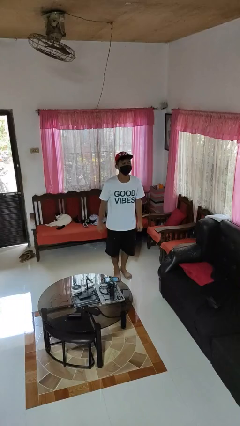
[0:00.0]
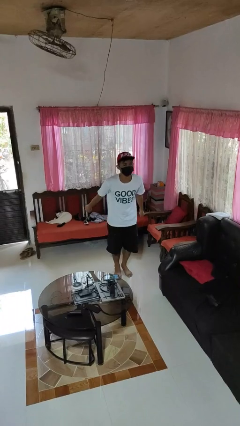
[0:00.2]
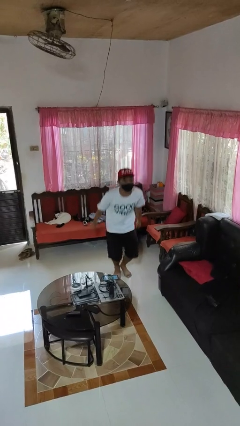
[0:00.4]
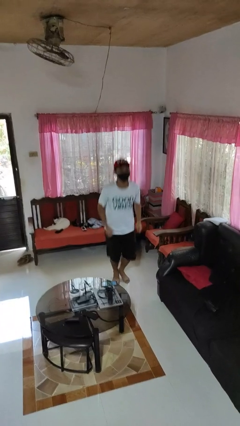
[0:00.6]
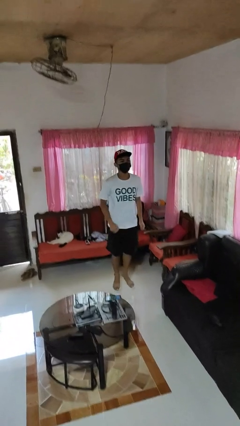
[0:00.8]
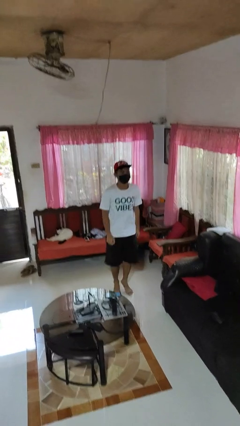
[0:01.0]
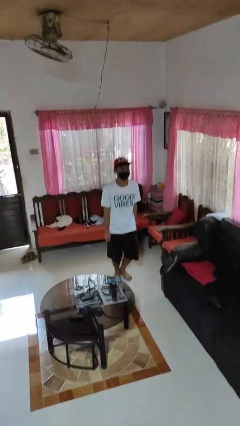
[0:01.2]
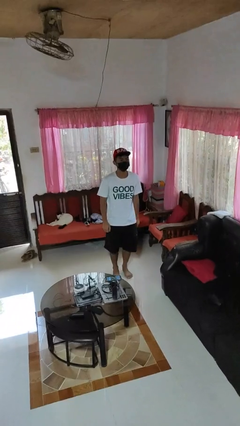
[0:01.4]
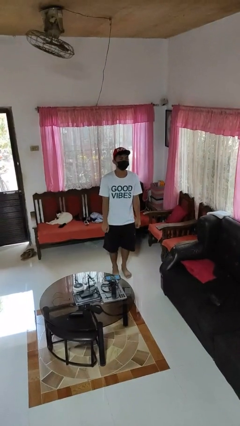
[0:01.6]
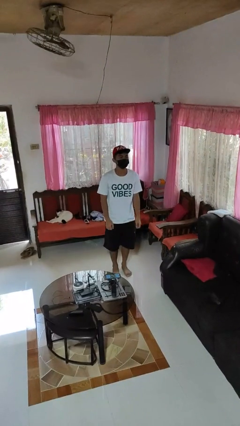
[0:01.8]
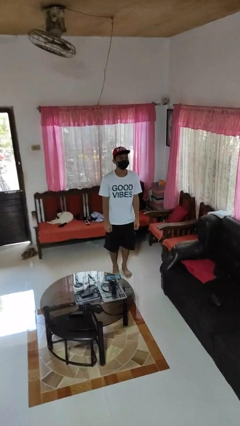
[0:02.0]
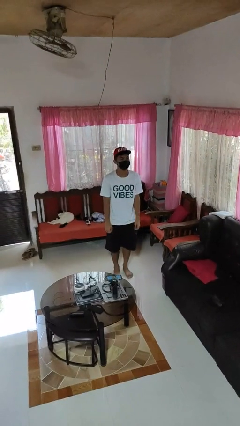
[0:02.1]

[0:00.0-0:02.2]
person jumps

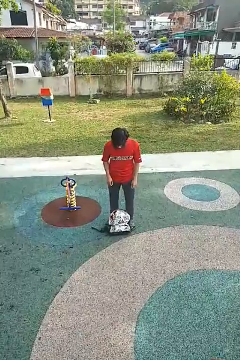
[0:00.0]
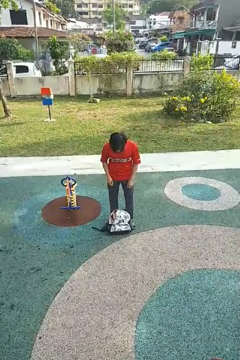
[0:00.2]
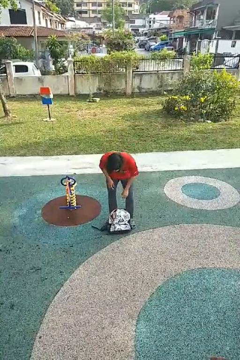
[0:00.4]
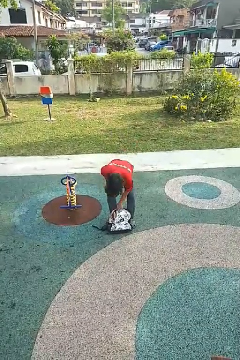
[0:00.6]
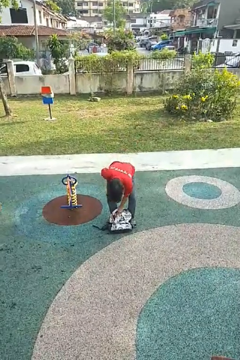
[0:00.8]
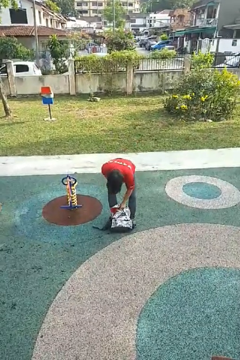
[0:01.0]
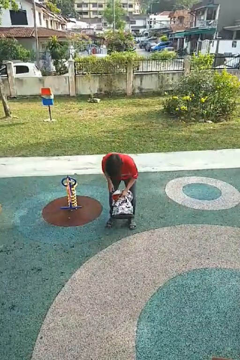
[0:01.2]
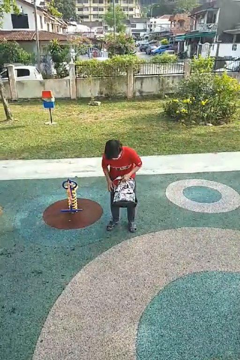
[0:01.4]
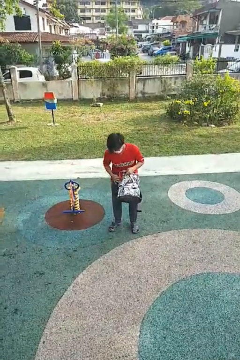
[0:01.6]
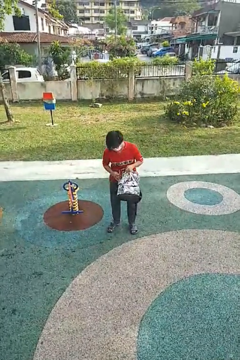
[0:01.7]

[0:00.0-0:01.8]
person picks up object from floor

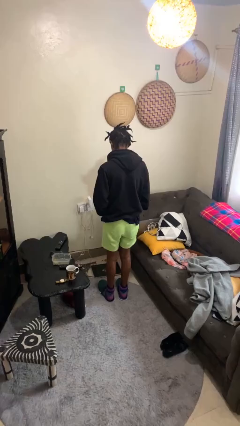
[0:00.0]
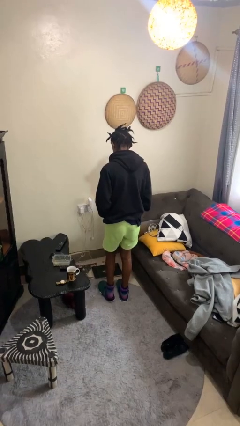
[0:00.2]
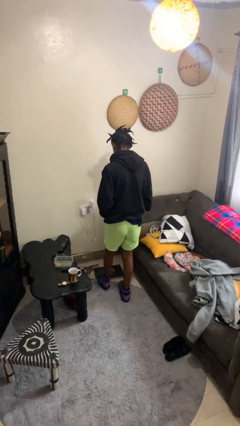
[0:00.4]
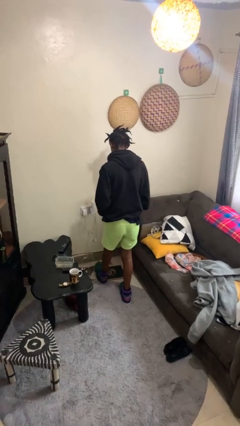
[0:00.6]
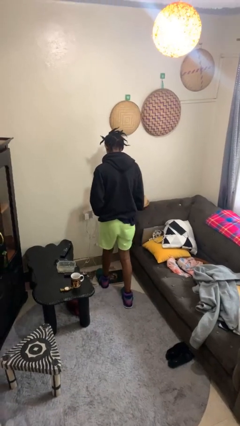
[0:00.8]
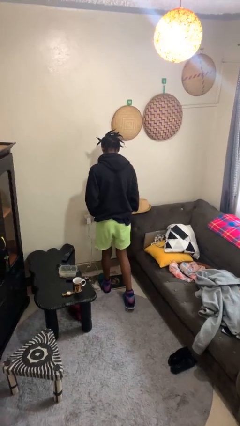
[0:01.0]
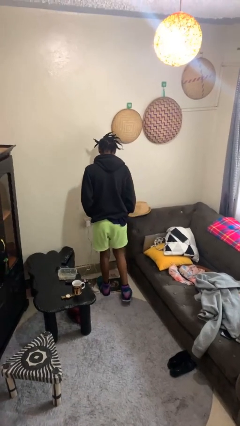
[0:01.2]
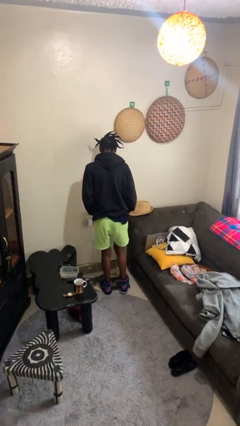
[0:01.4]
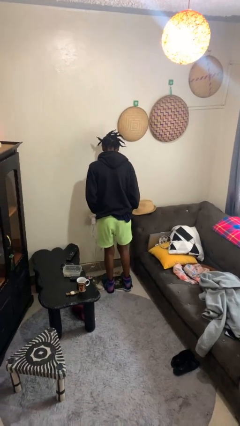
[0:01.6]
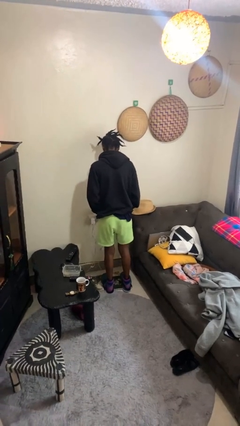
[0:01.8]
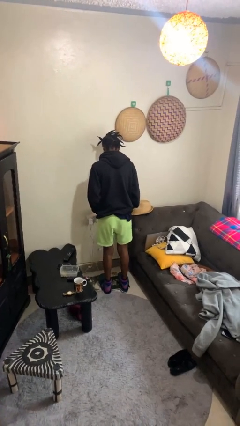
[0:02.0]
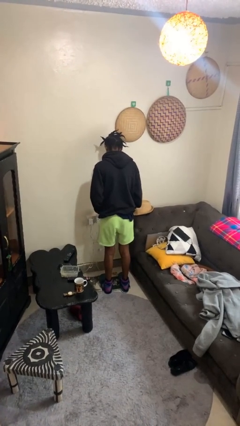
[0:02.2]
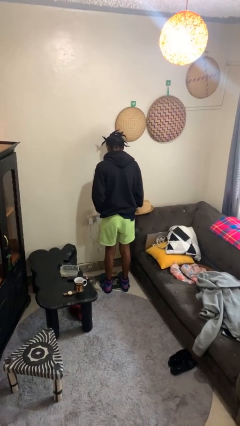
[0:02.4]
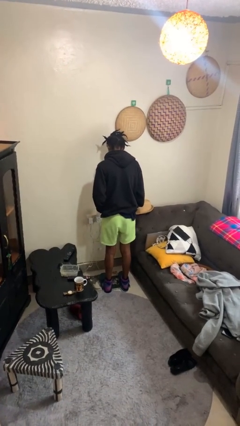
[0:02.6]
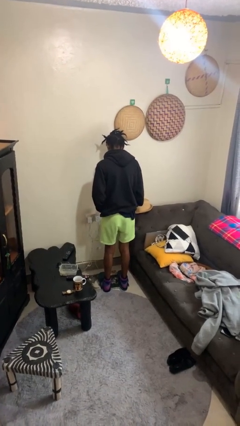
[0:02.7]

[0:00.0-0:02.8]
person uses bodyweight scale

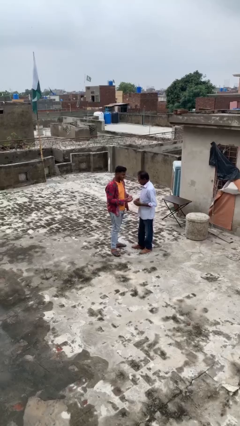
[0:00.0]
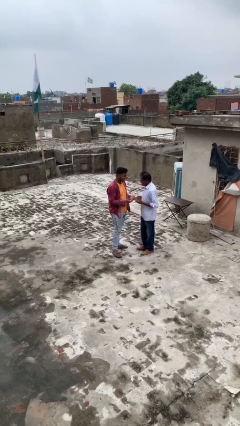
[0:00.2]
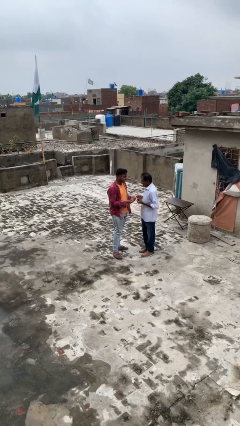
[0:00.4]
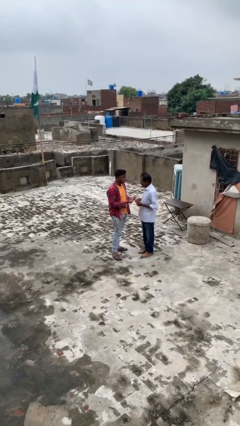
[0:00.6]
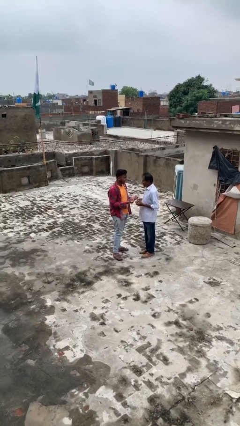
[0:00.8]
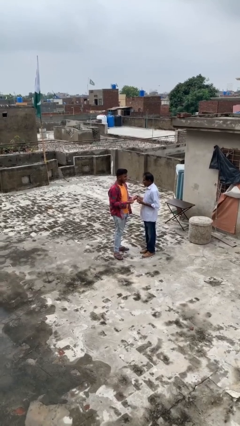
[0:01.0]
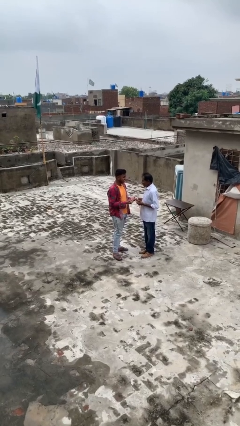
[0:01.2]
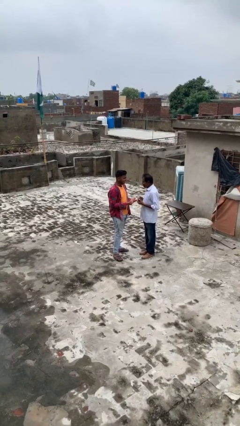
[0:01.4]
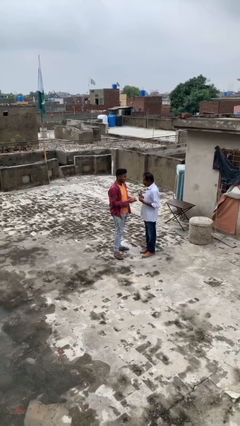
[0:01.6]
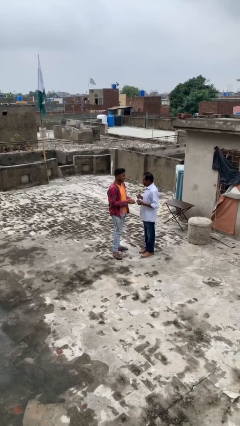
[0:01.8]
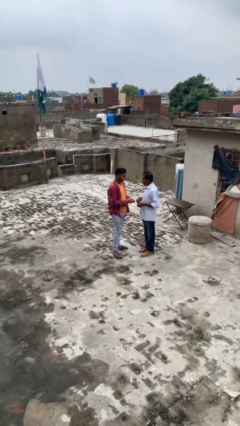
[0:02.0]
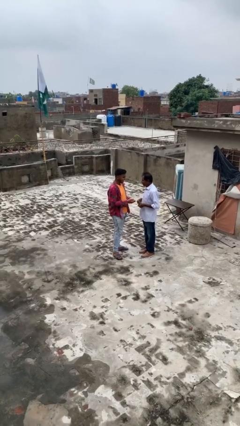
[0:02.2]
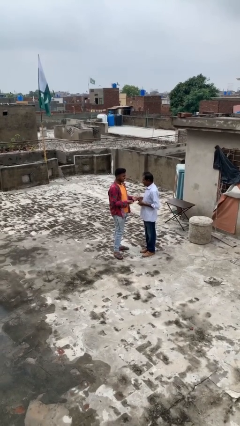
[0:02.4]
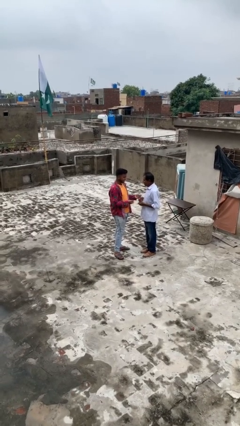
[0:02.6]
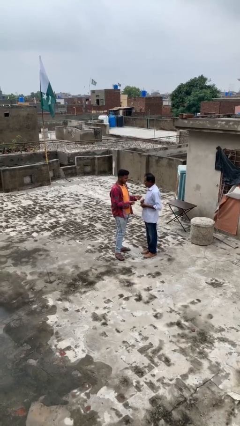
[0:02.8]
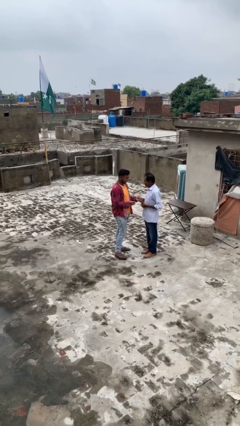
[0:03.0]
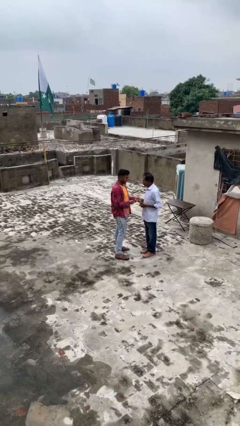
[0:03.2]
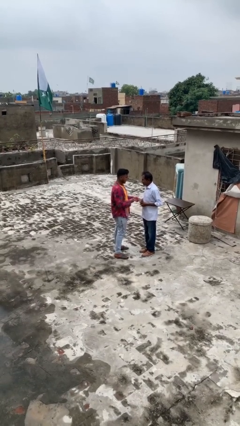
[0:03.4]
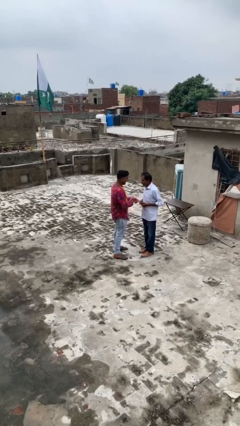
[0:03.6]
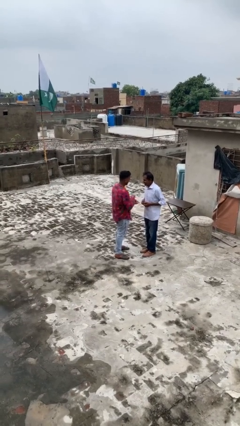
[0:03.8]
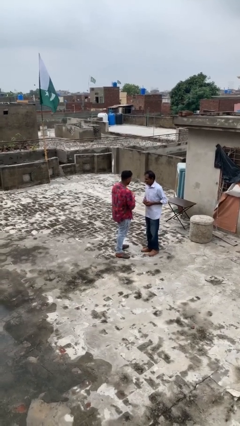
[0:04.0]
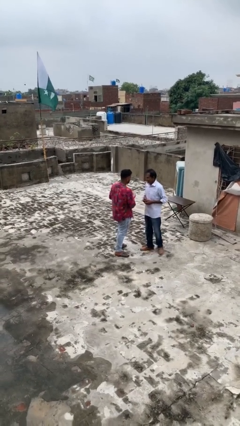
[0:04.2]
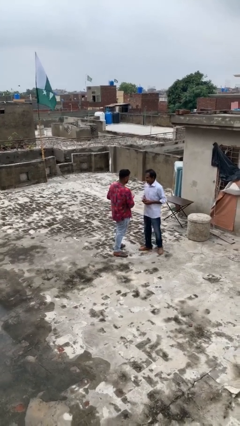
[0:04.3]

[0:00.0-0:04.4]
person talks to person

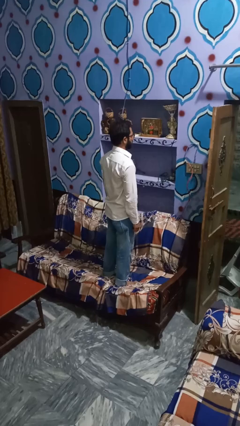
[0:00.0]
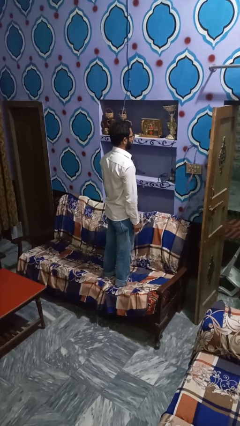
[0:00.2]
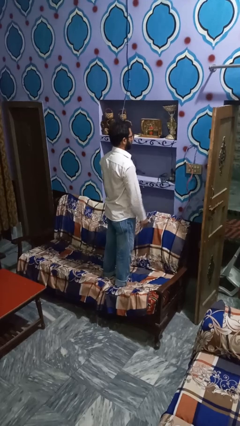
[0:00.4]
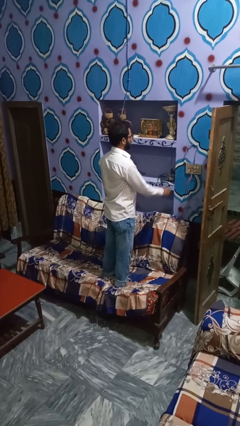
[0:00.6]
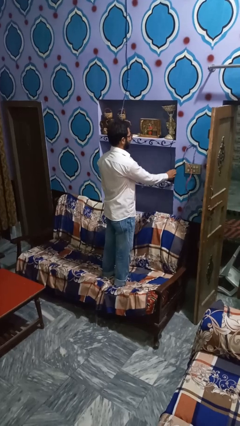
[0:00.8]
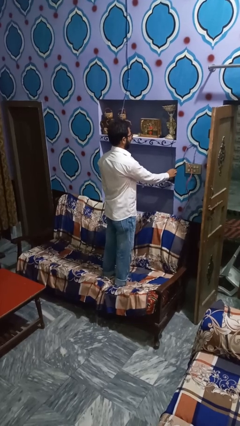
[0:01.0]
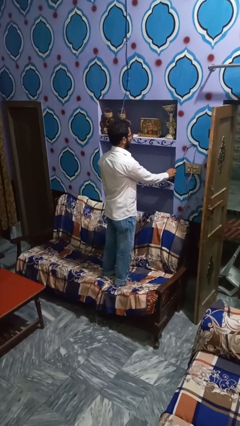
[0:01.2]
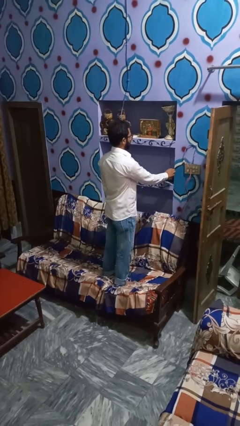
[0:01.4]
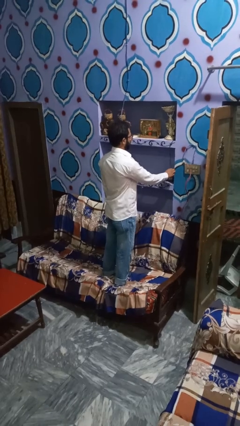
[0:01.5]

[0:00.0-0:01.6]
person turns on lamp

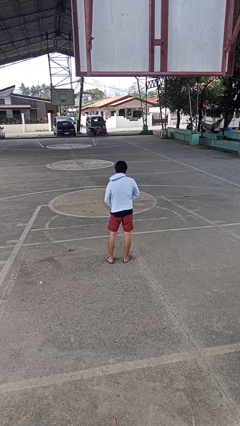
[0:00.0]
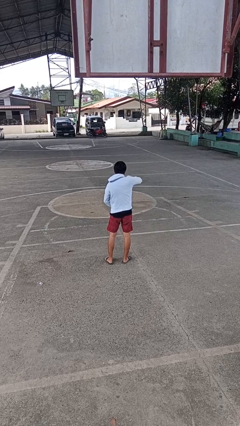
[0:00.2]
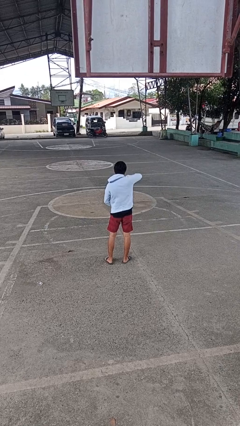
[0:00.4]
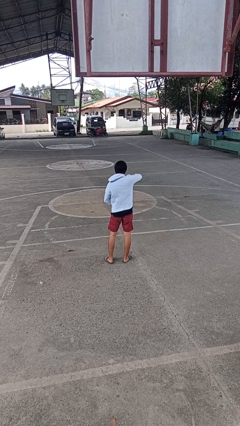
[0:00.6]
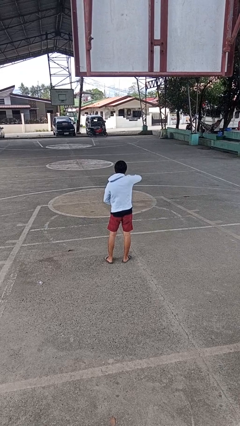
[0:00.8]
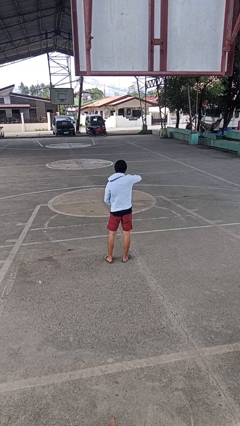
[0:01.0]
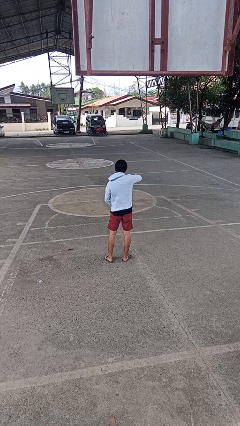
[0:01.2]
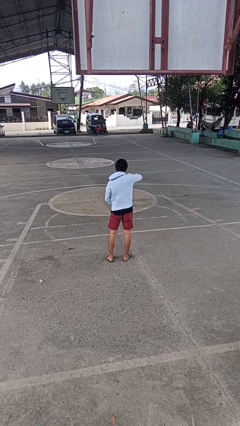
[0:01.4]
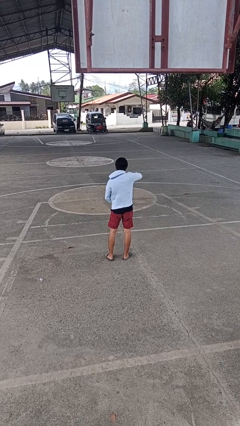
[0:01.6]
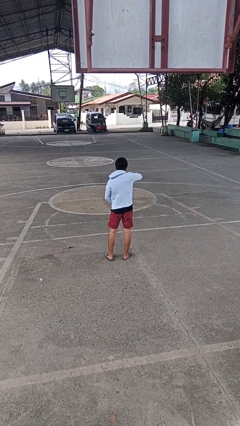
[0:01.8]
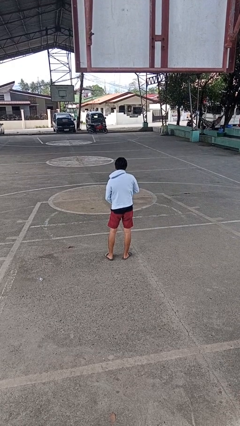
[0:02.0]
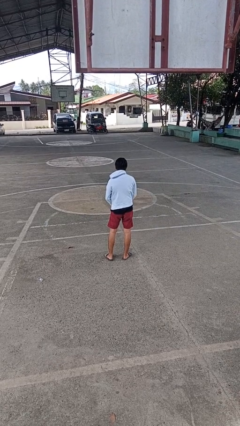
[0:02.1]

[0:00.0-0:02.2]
person zips up jacket

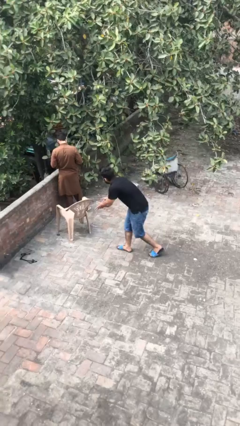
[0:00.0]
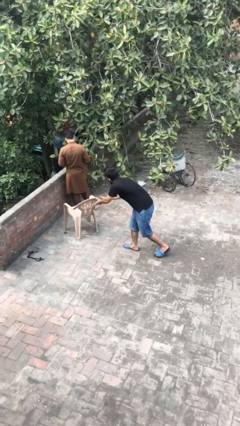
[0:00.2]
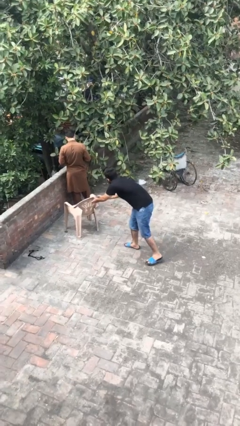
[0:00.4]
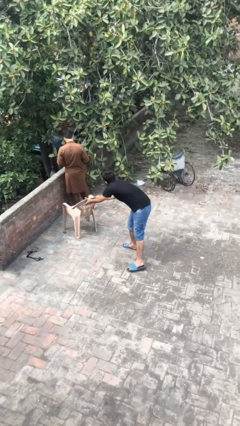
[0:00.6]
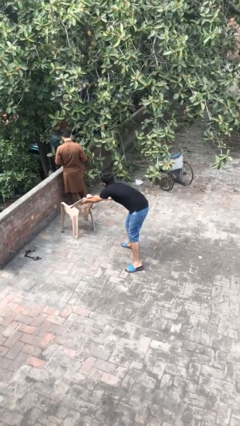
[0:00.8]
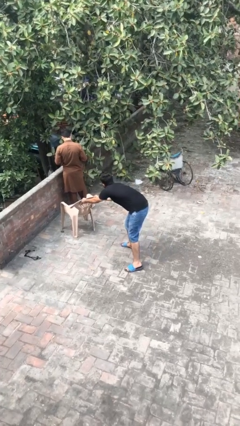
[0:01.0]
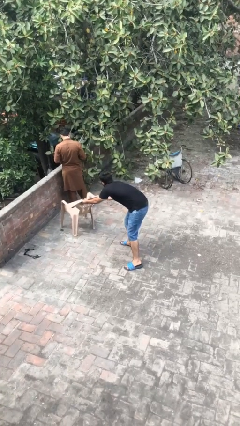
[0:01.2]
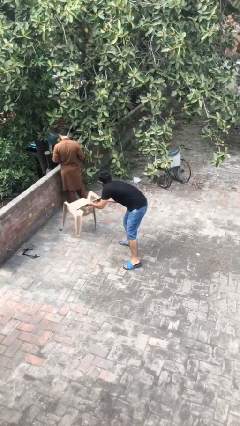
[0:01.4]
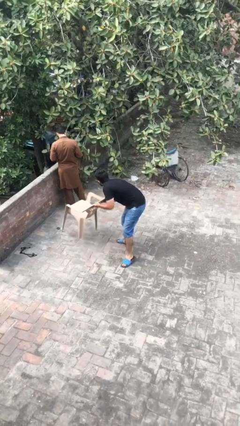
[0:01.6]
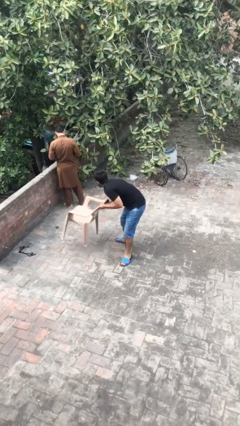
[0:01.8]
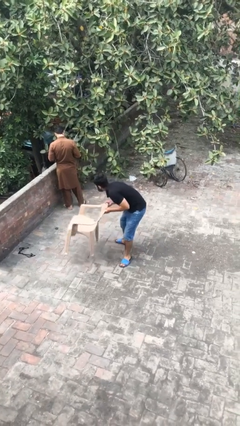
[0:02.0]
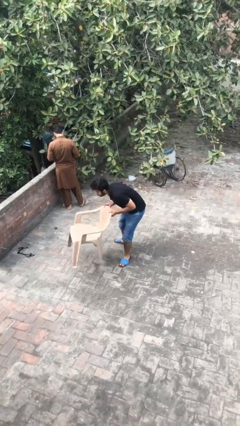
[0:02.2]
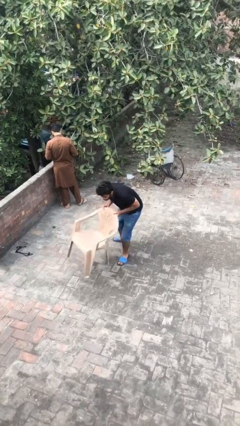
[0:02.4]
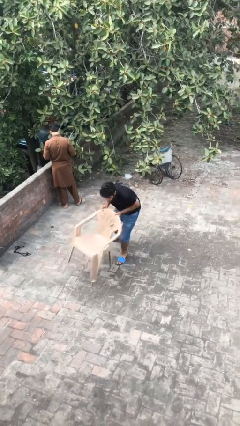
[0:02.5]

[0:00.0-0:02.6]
person steals object from person
